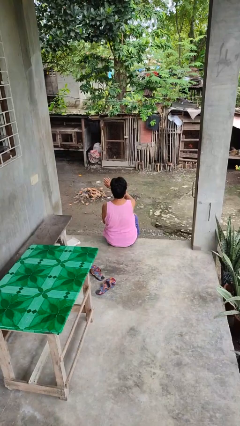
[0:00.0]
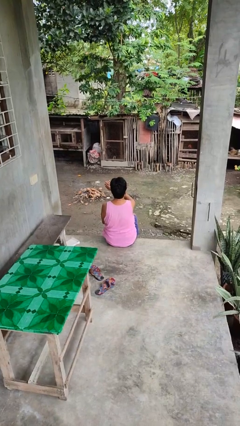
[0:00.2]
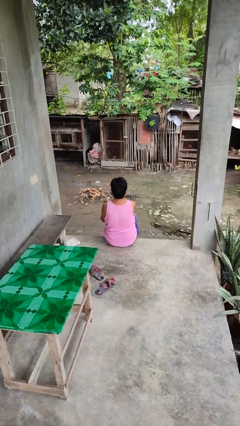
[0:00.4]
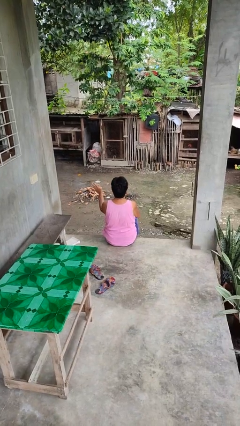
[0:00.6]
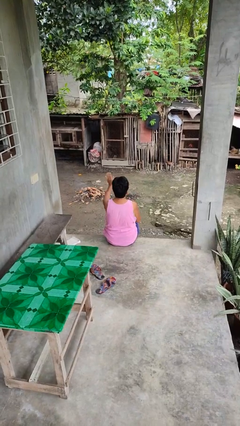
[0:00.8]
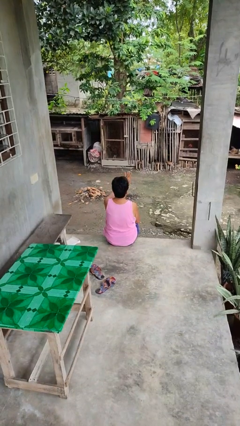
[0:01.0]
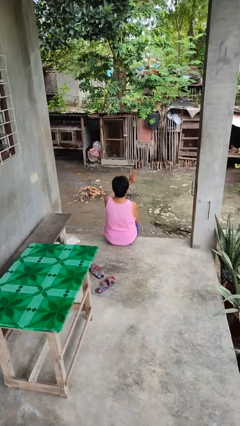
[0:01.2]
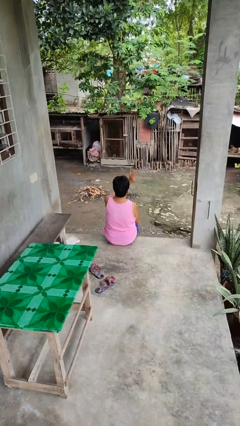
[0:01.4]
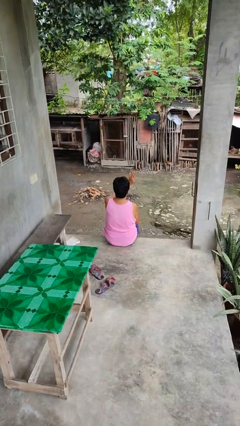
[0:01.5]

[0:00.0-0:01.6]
person gestures swipe right

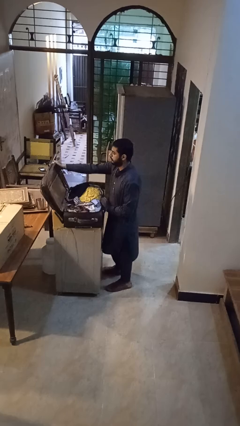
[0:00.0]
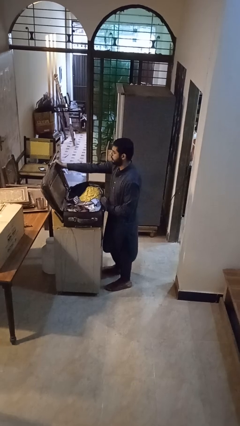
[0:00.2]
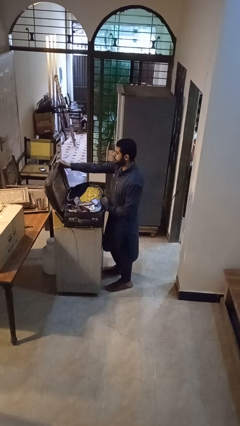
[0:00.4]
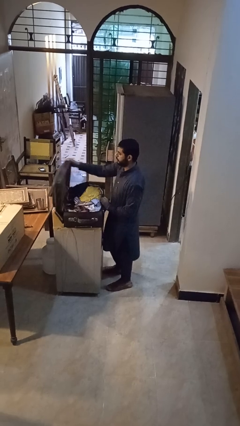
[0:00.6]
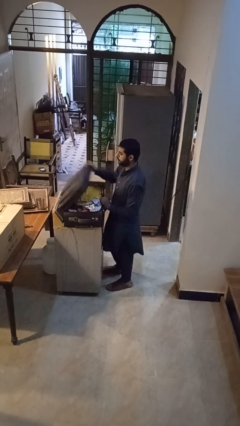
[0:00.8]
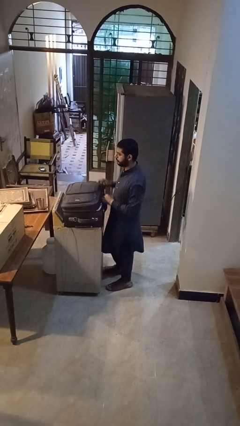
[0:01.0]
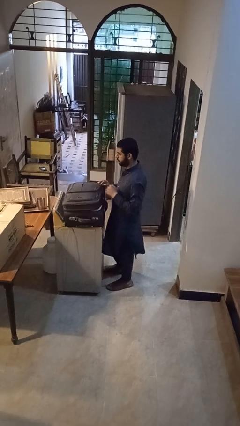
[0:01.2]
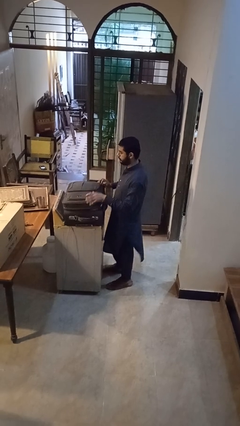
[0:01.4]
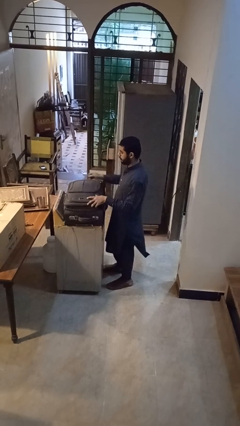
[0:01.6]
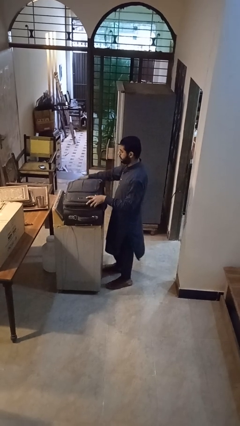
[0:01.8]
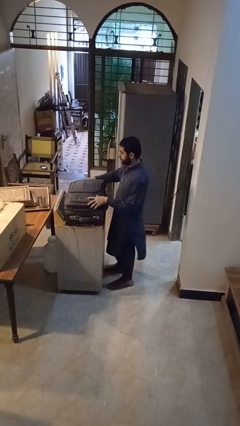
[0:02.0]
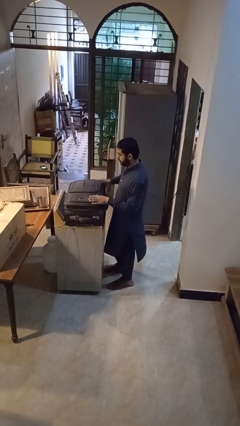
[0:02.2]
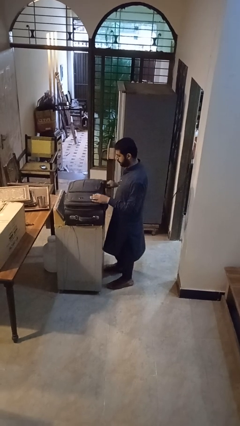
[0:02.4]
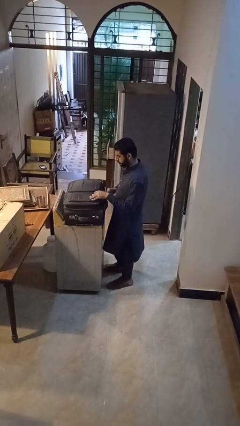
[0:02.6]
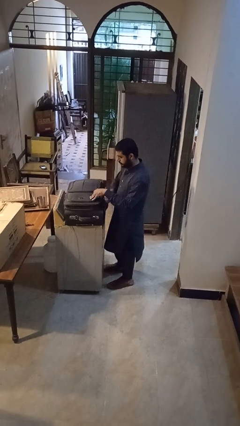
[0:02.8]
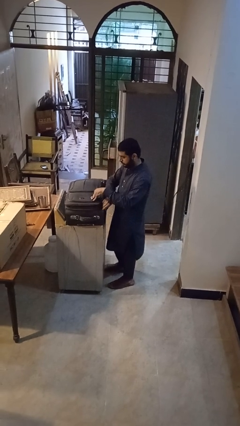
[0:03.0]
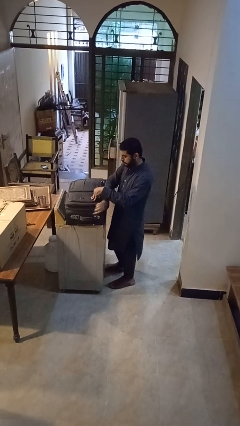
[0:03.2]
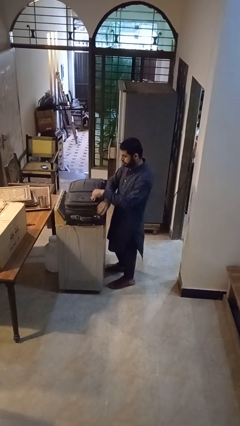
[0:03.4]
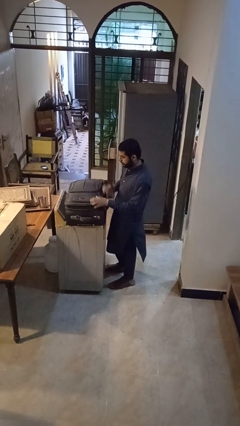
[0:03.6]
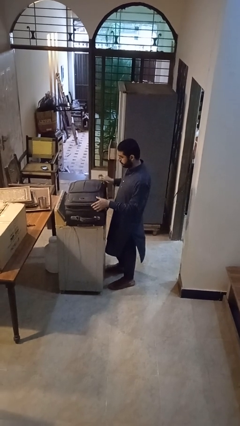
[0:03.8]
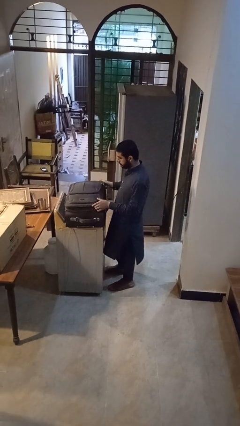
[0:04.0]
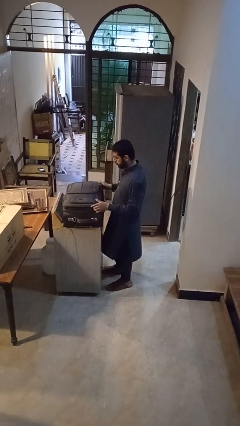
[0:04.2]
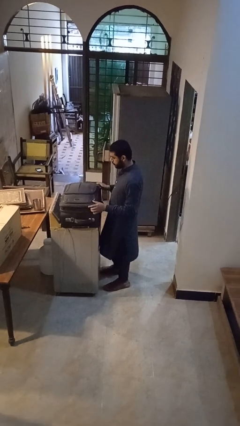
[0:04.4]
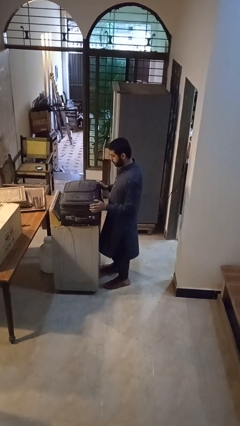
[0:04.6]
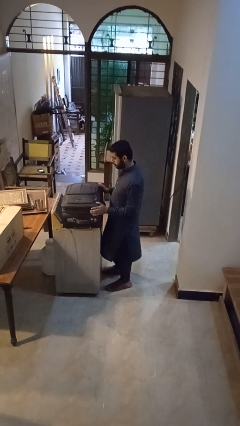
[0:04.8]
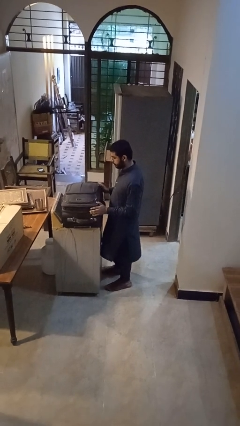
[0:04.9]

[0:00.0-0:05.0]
person closes suitcase

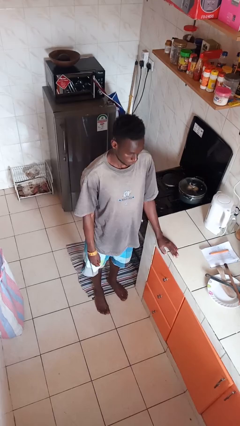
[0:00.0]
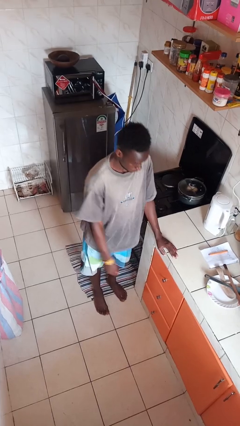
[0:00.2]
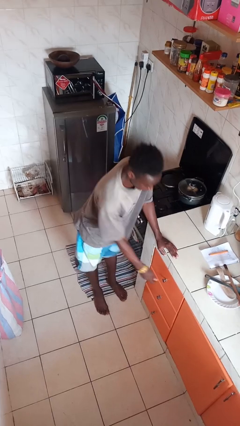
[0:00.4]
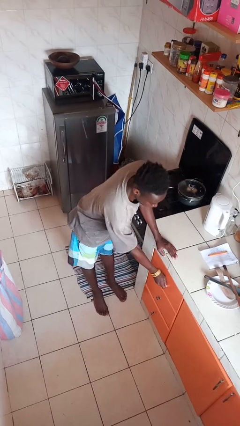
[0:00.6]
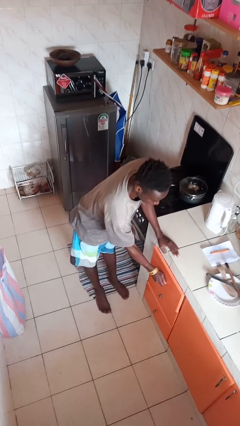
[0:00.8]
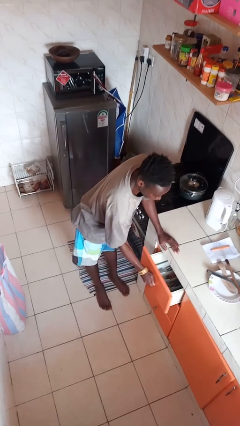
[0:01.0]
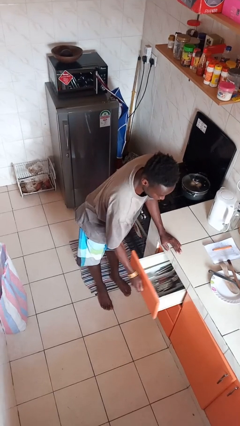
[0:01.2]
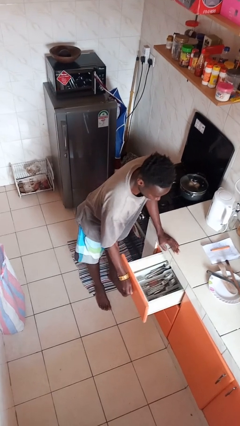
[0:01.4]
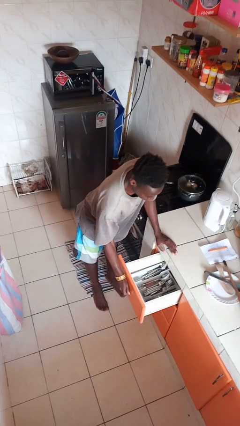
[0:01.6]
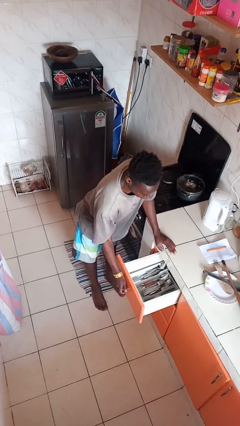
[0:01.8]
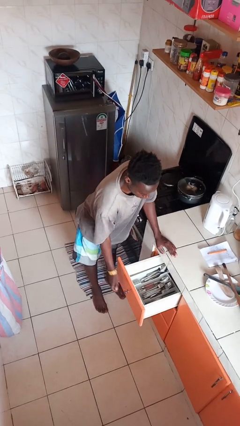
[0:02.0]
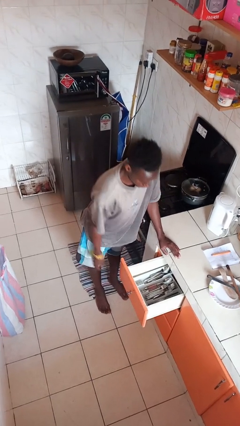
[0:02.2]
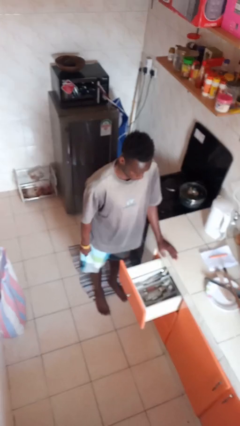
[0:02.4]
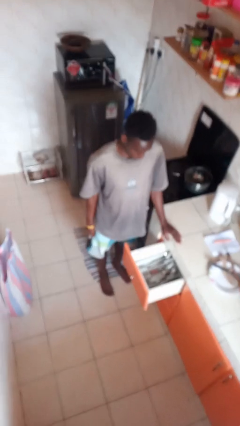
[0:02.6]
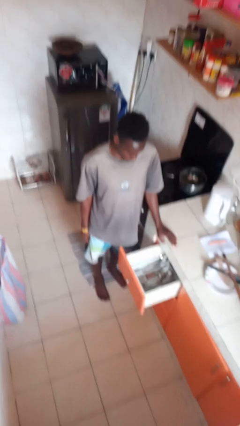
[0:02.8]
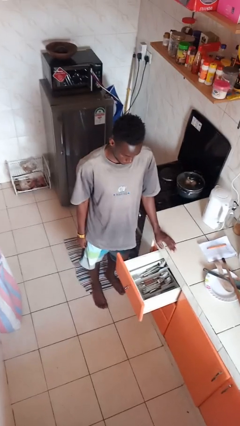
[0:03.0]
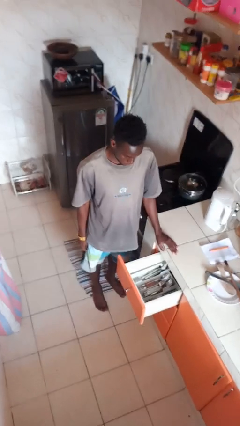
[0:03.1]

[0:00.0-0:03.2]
person opens kitchen drawer

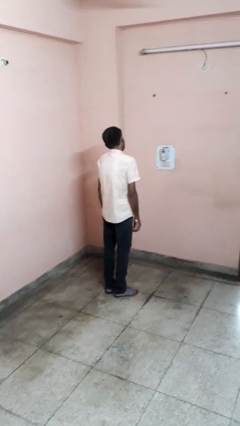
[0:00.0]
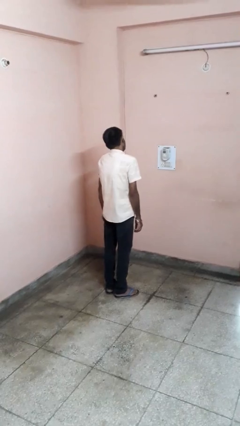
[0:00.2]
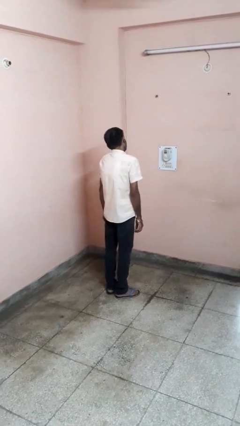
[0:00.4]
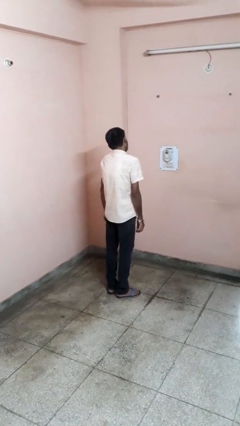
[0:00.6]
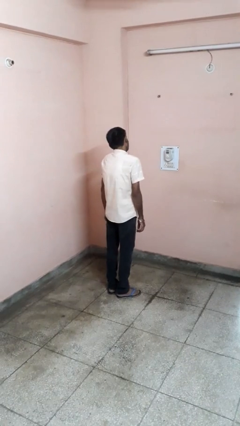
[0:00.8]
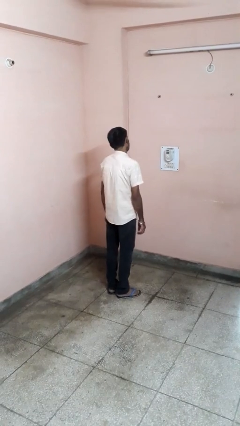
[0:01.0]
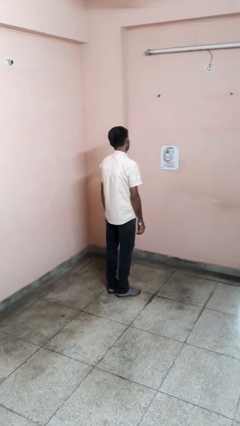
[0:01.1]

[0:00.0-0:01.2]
person shrugs

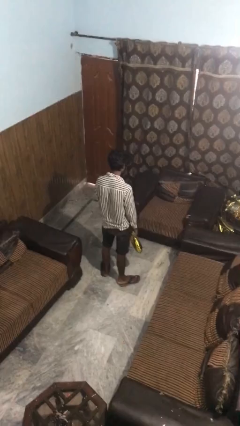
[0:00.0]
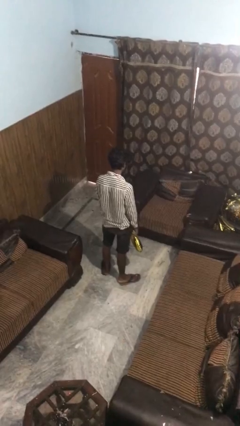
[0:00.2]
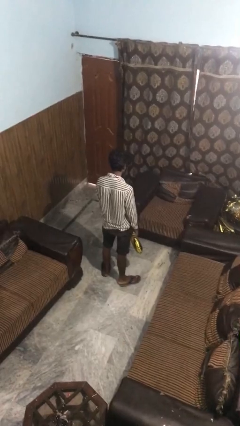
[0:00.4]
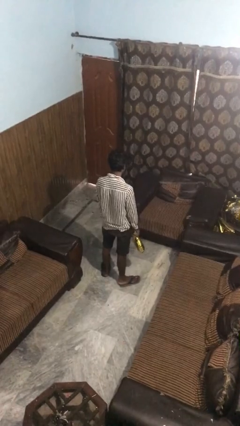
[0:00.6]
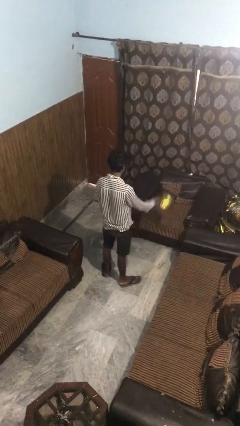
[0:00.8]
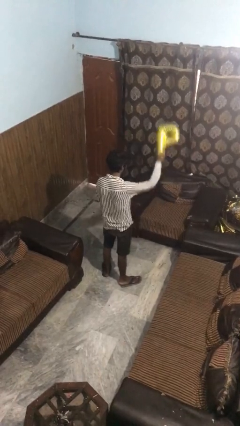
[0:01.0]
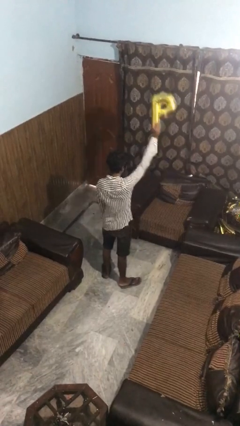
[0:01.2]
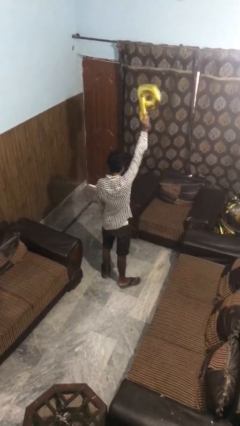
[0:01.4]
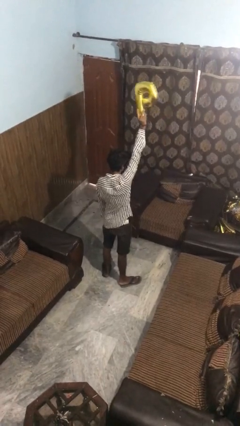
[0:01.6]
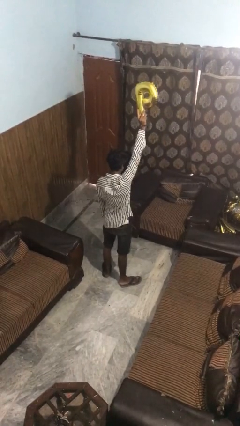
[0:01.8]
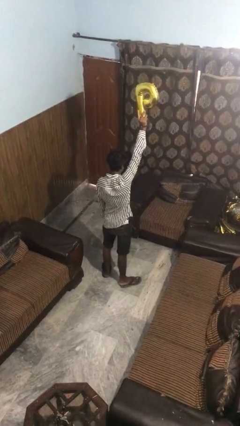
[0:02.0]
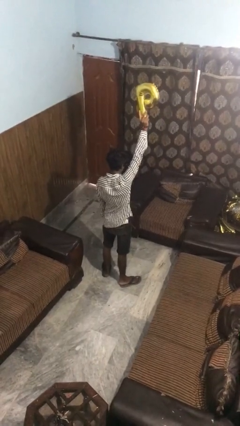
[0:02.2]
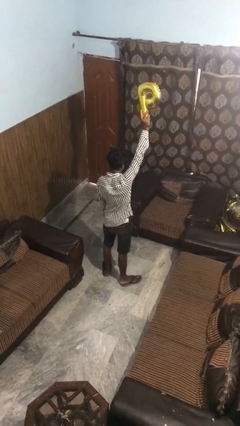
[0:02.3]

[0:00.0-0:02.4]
person holds object above head

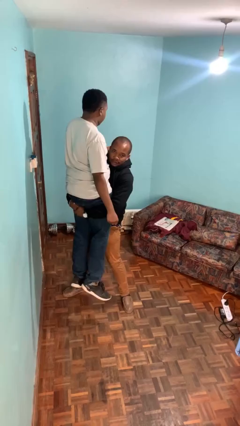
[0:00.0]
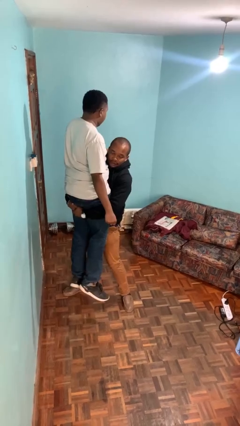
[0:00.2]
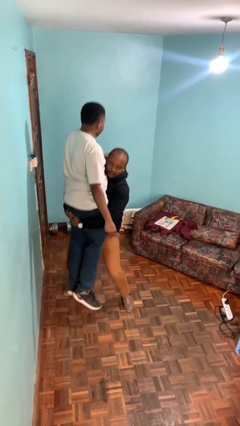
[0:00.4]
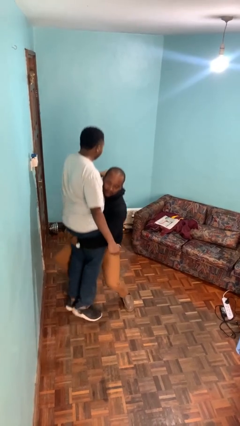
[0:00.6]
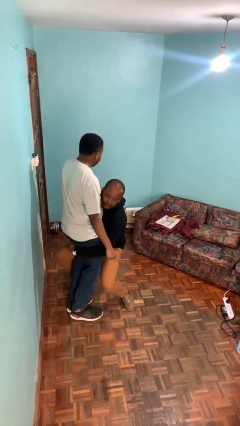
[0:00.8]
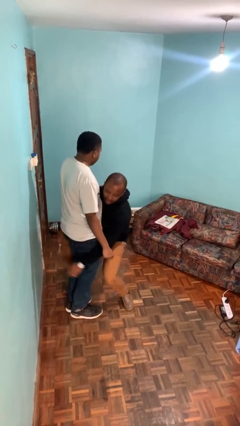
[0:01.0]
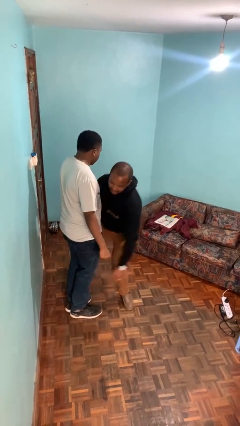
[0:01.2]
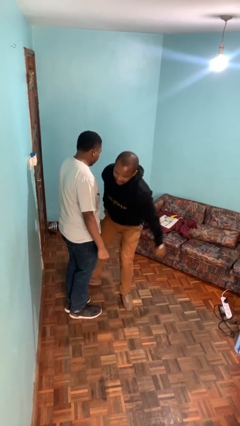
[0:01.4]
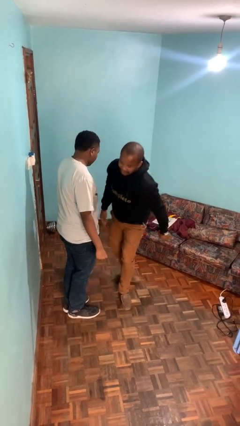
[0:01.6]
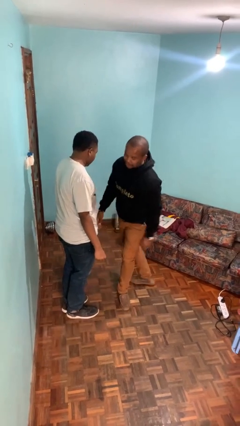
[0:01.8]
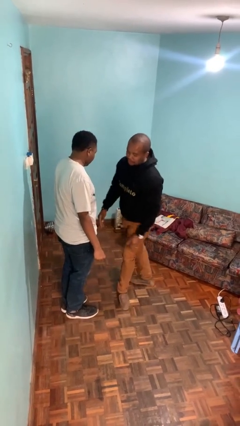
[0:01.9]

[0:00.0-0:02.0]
person puts down person

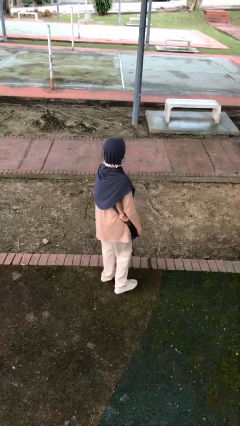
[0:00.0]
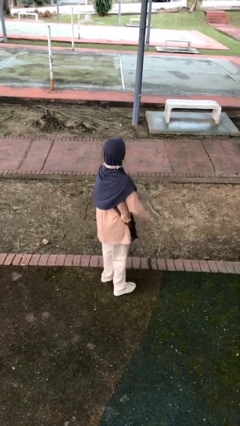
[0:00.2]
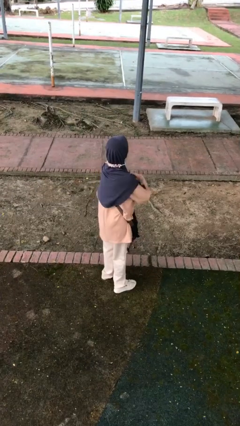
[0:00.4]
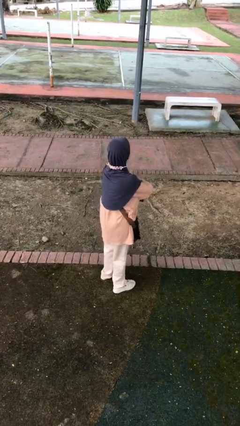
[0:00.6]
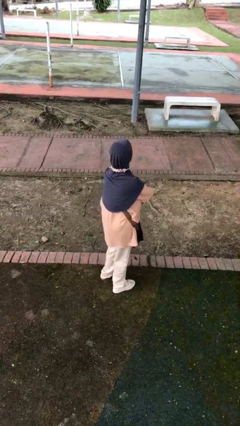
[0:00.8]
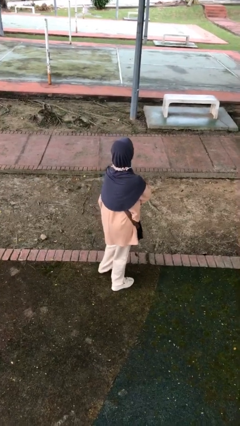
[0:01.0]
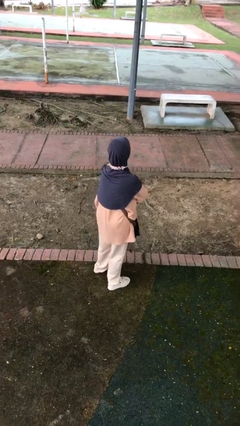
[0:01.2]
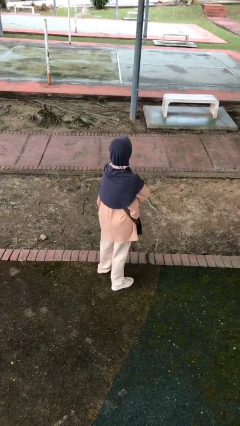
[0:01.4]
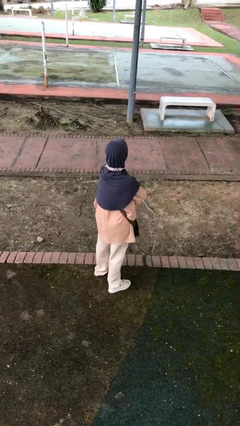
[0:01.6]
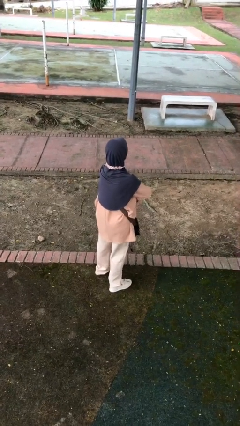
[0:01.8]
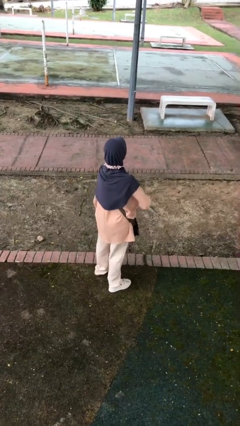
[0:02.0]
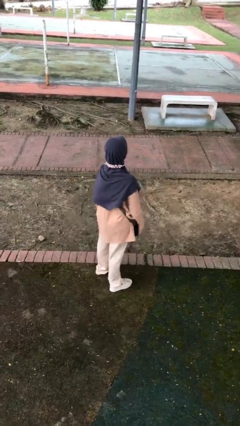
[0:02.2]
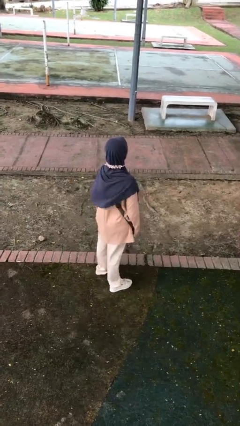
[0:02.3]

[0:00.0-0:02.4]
person crosses arms
